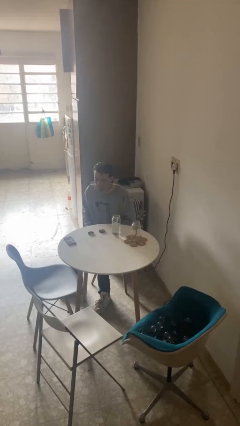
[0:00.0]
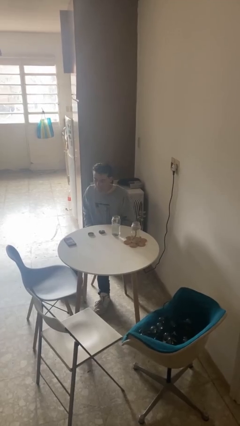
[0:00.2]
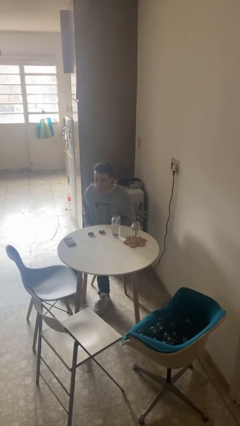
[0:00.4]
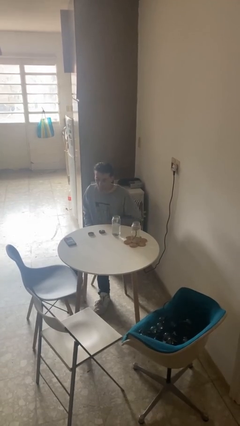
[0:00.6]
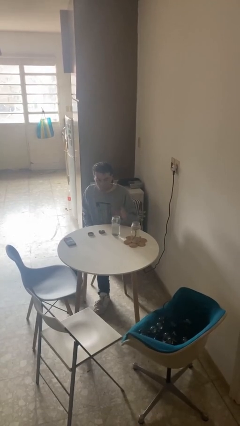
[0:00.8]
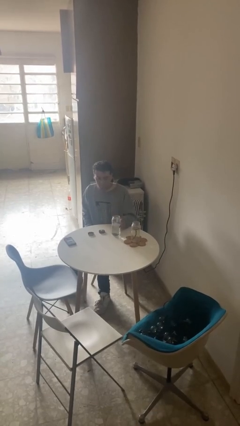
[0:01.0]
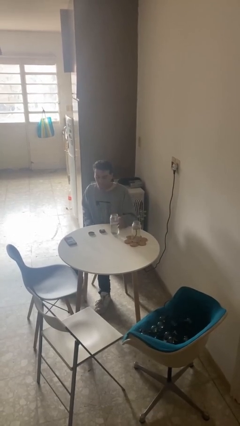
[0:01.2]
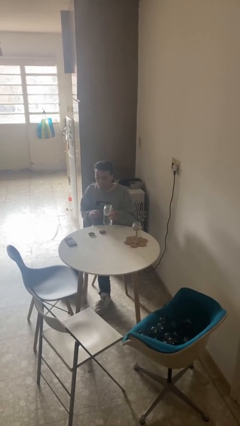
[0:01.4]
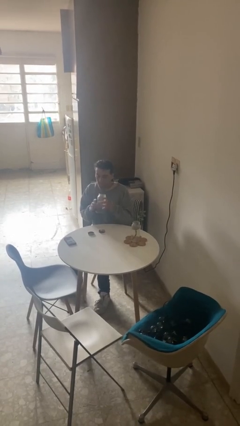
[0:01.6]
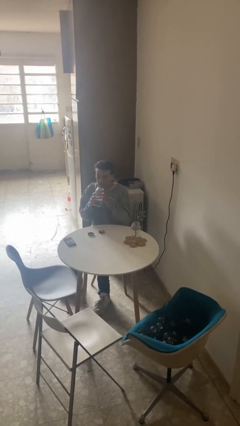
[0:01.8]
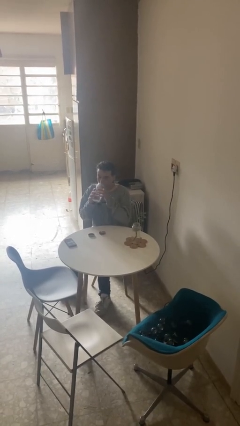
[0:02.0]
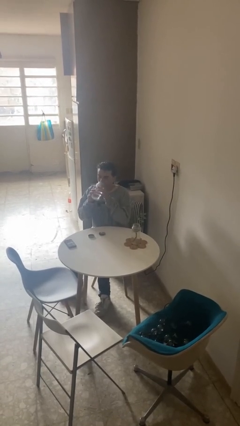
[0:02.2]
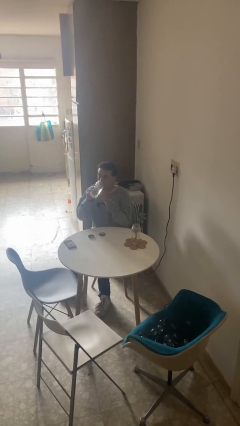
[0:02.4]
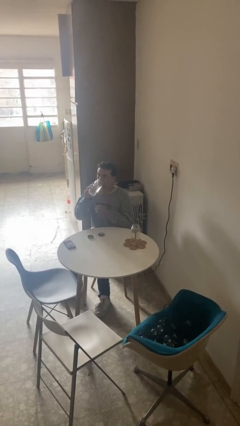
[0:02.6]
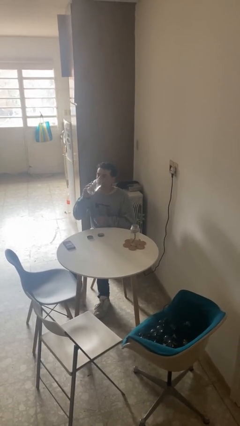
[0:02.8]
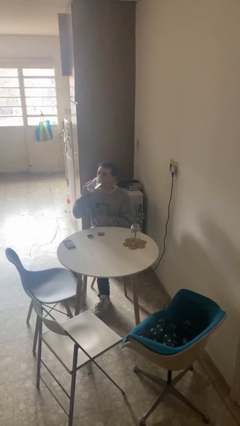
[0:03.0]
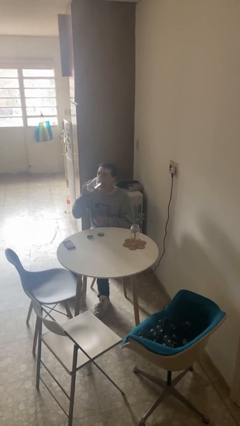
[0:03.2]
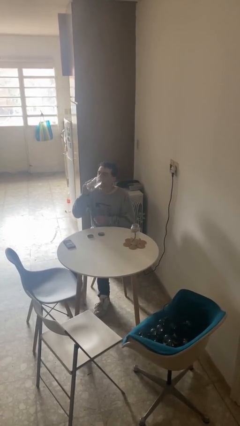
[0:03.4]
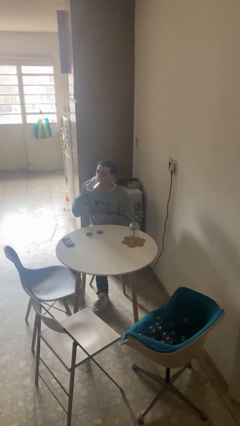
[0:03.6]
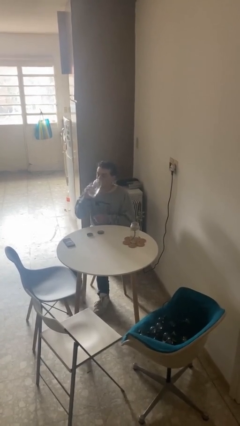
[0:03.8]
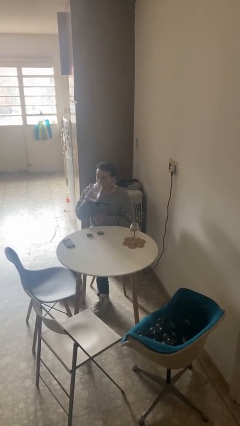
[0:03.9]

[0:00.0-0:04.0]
person drinks from cup

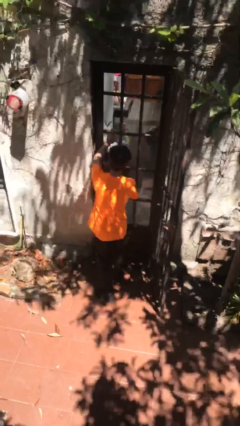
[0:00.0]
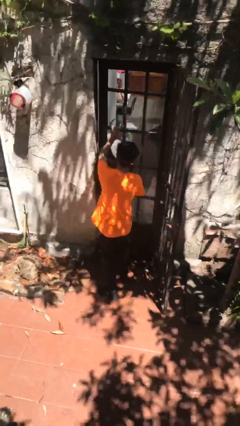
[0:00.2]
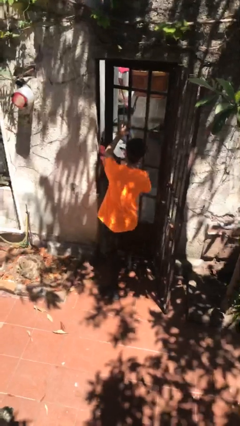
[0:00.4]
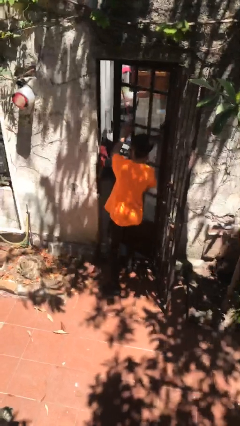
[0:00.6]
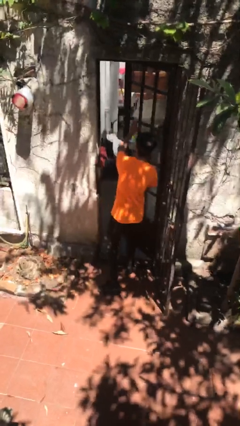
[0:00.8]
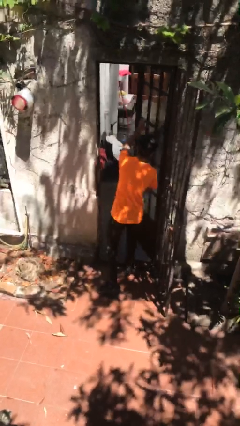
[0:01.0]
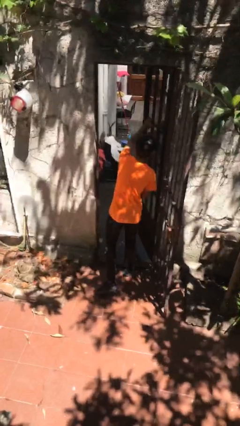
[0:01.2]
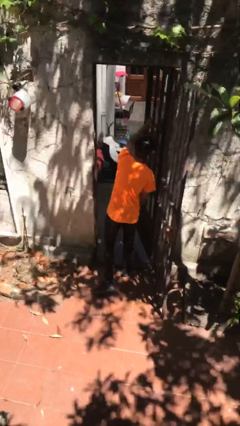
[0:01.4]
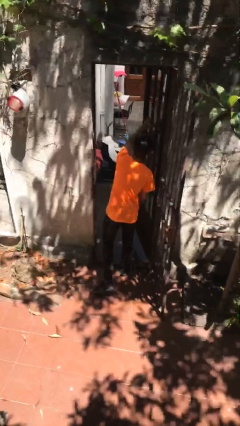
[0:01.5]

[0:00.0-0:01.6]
person opens facility door

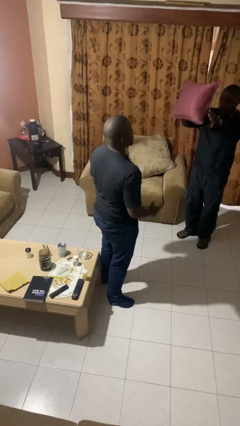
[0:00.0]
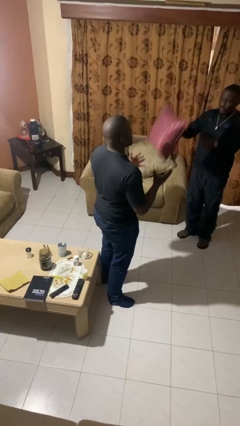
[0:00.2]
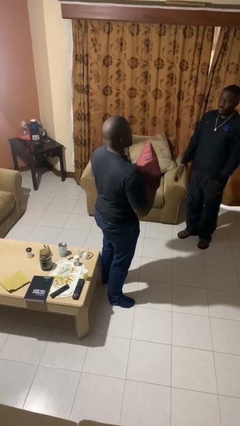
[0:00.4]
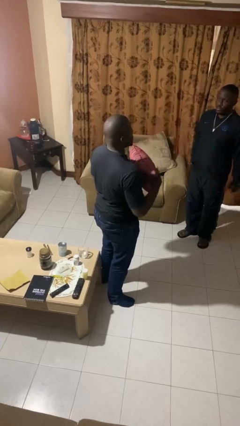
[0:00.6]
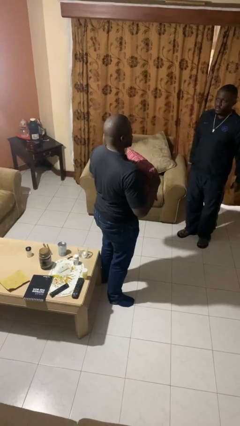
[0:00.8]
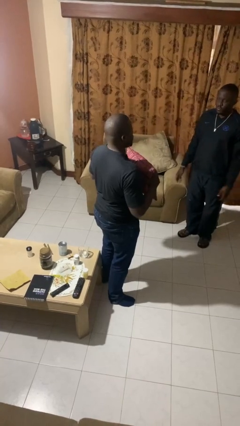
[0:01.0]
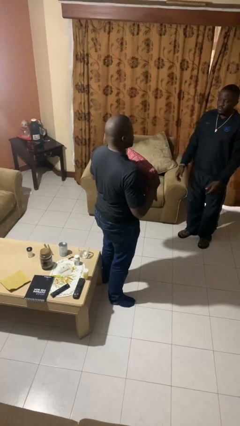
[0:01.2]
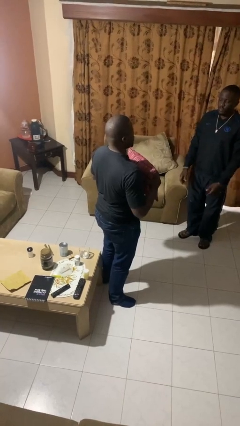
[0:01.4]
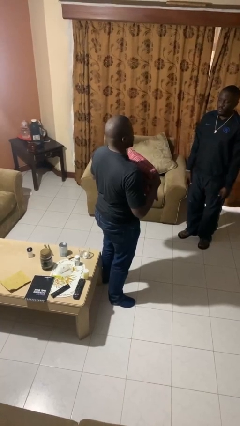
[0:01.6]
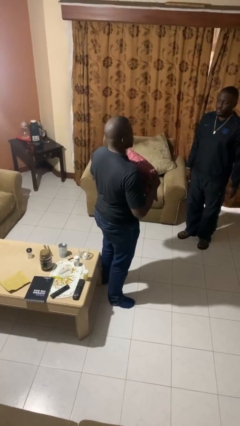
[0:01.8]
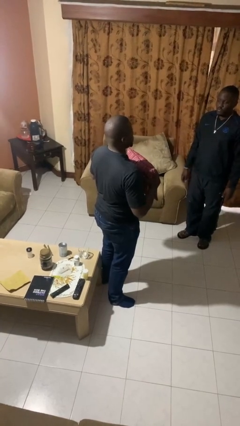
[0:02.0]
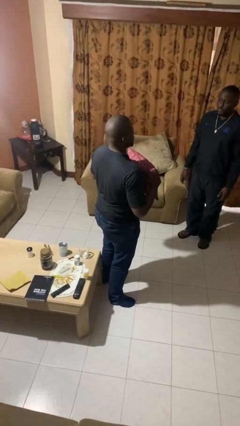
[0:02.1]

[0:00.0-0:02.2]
person catches object from person

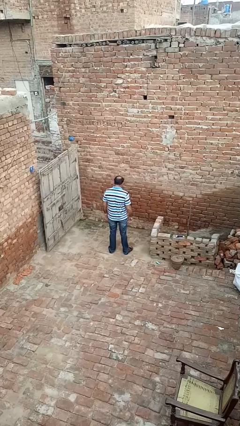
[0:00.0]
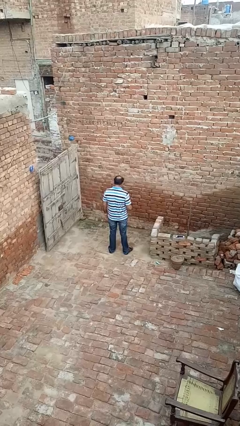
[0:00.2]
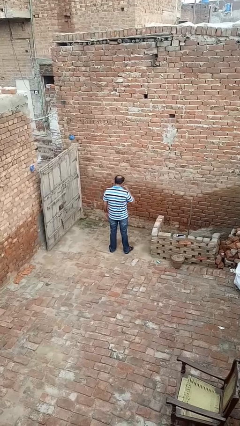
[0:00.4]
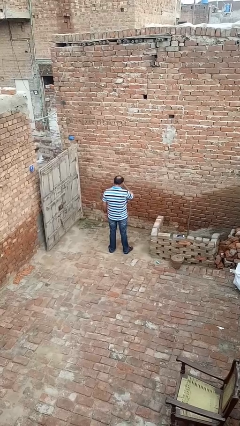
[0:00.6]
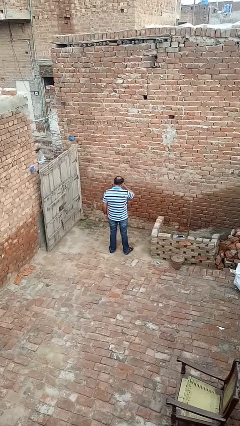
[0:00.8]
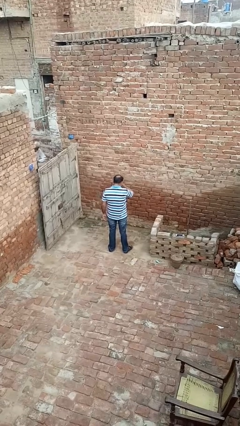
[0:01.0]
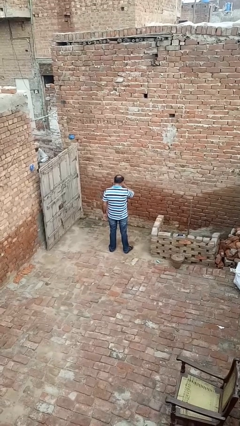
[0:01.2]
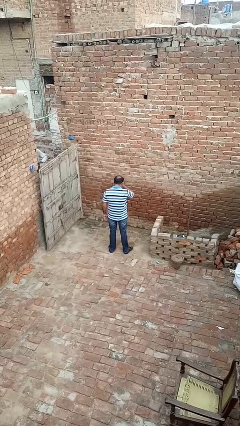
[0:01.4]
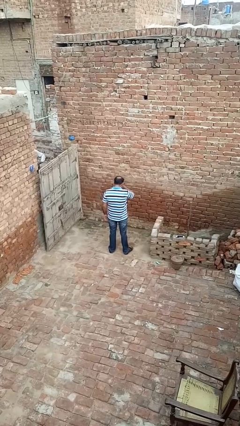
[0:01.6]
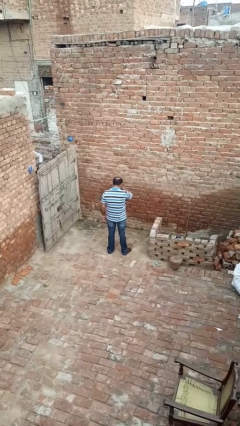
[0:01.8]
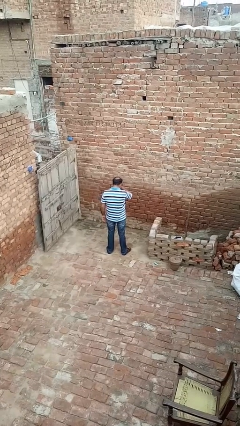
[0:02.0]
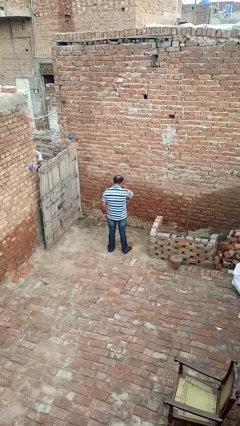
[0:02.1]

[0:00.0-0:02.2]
person rubs eyes

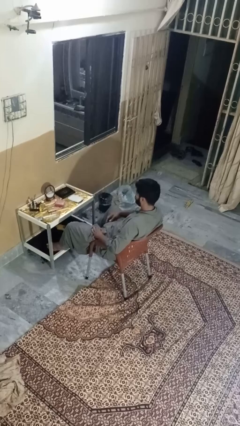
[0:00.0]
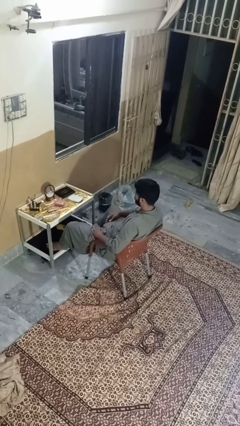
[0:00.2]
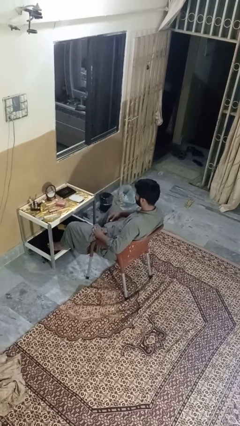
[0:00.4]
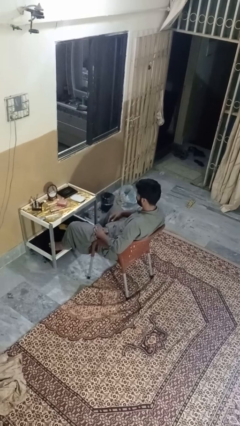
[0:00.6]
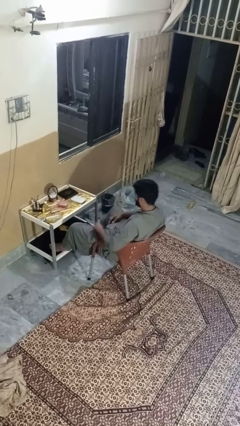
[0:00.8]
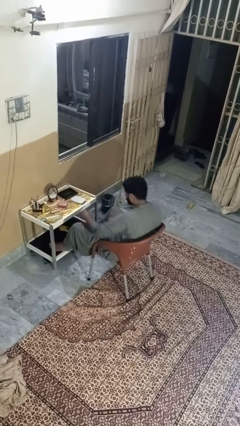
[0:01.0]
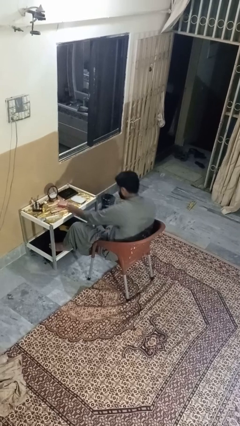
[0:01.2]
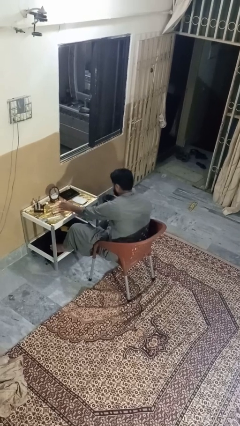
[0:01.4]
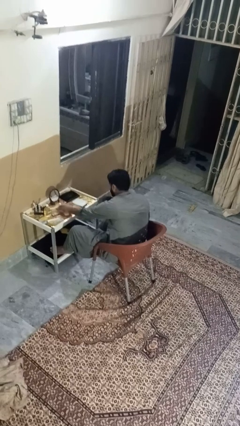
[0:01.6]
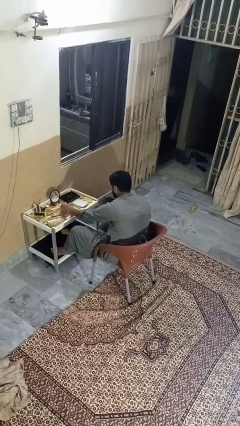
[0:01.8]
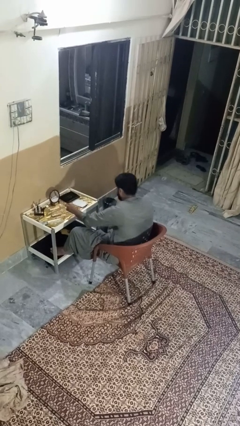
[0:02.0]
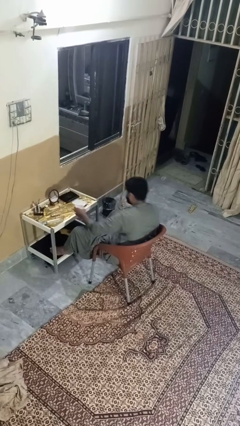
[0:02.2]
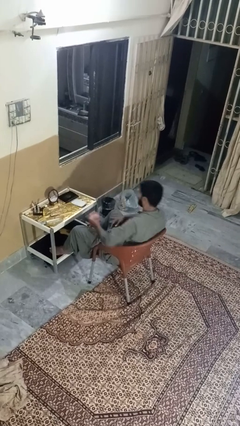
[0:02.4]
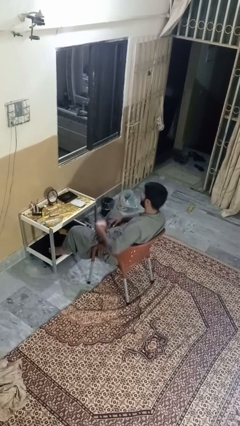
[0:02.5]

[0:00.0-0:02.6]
person picks up object from table

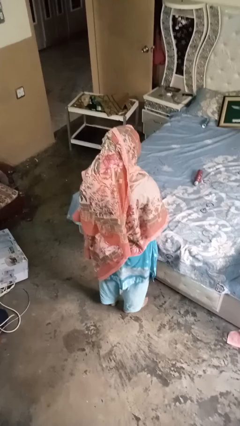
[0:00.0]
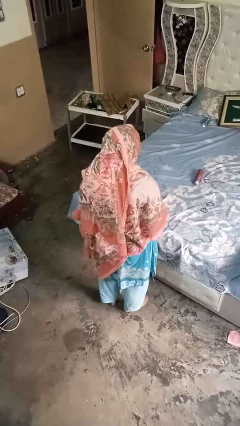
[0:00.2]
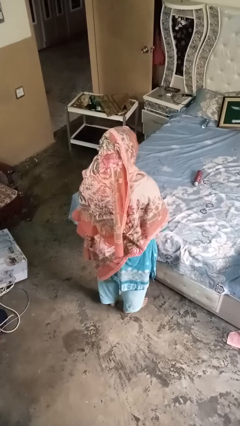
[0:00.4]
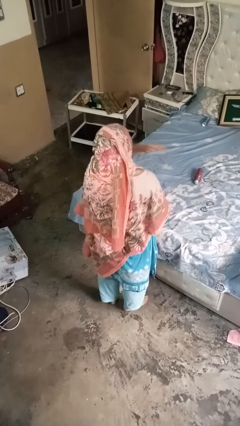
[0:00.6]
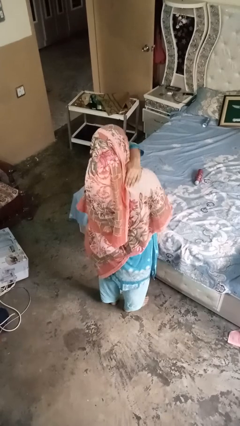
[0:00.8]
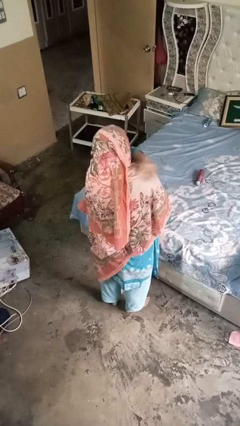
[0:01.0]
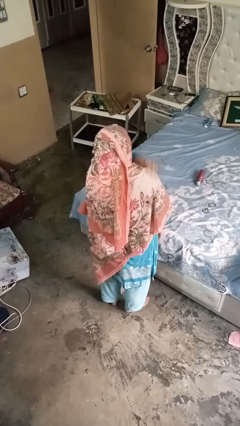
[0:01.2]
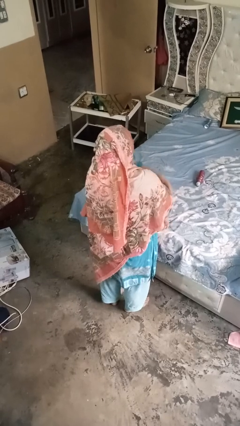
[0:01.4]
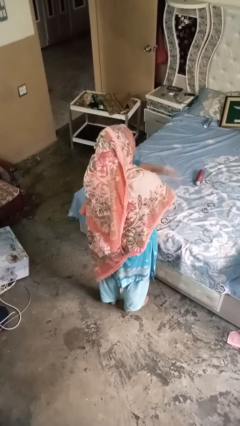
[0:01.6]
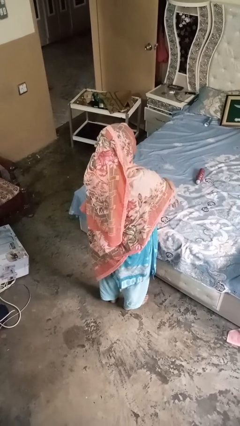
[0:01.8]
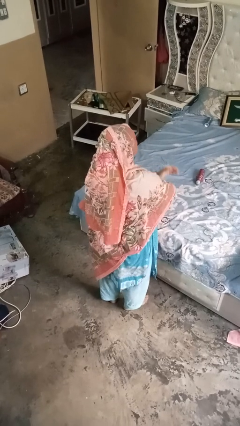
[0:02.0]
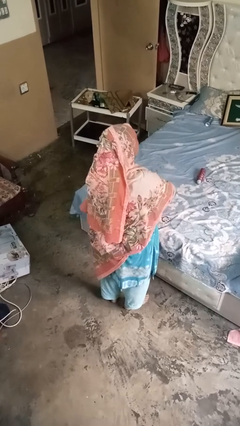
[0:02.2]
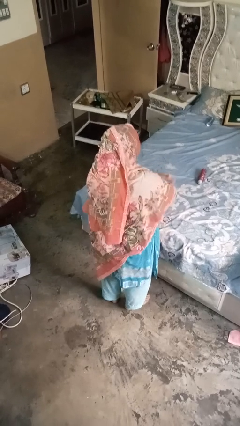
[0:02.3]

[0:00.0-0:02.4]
person swats bug

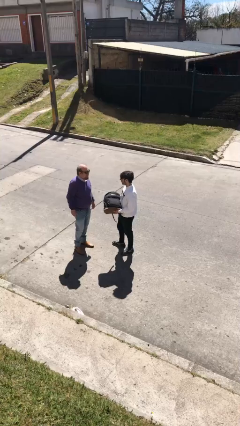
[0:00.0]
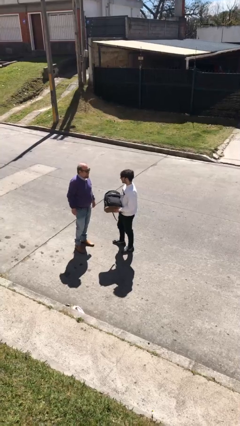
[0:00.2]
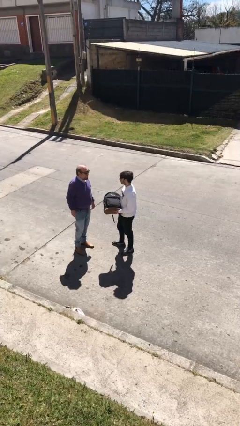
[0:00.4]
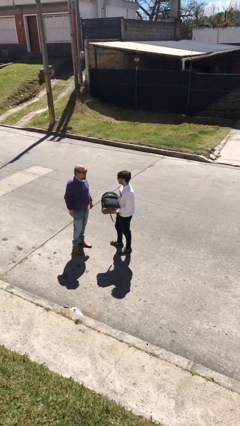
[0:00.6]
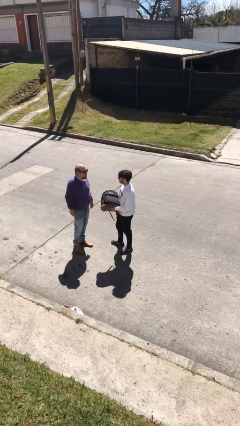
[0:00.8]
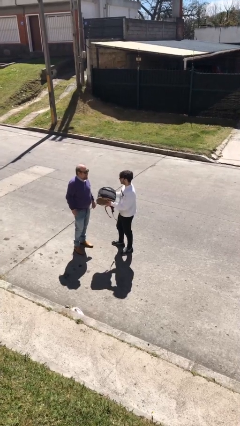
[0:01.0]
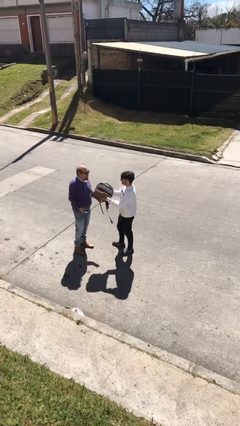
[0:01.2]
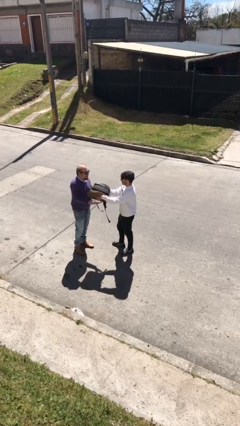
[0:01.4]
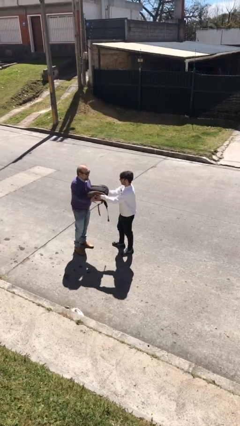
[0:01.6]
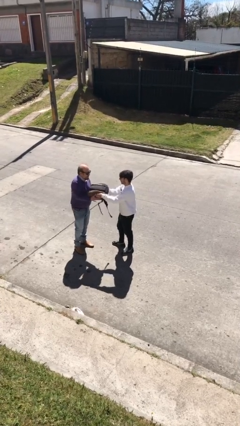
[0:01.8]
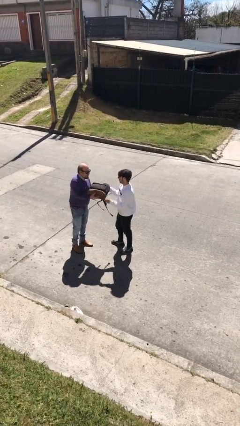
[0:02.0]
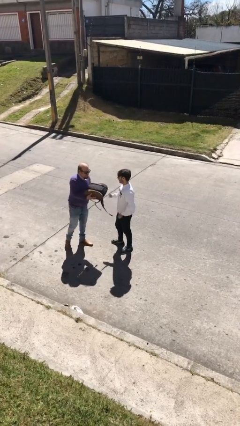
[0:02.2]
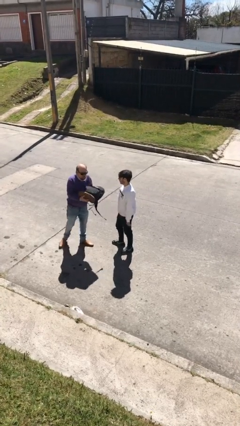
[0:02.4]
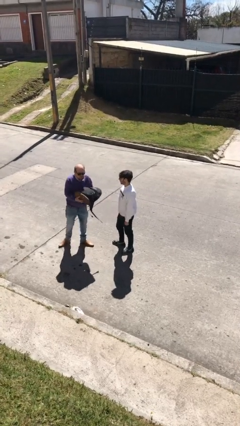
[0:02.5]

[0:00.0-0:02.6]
person transfers object to person
